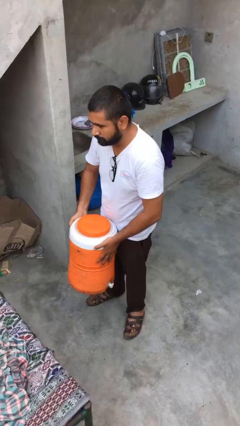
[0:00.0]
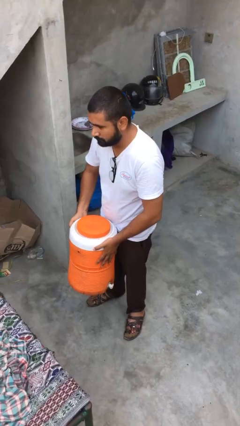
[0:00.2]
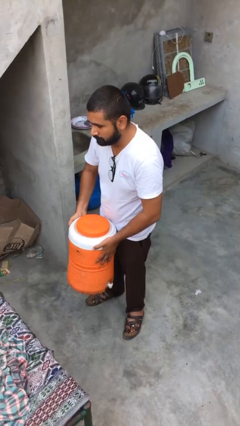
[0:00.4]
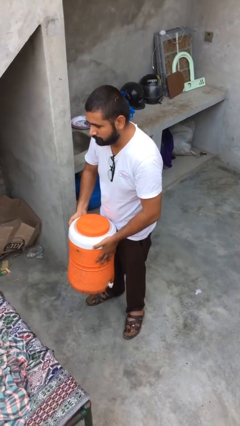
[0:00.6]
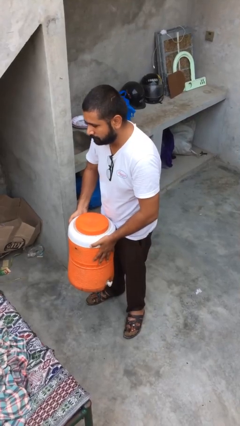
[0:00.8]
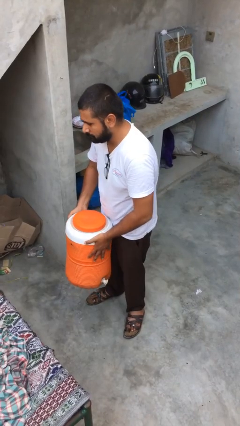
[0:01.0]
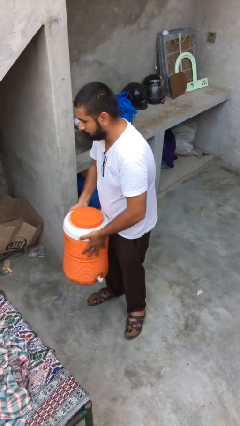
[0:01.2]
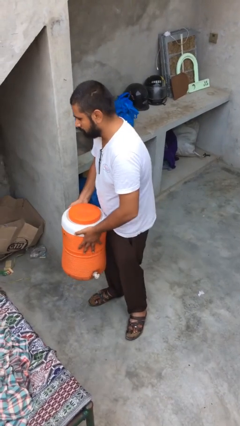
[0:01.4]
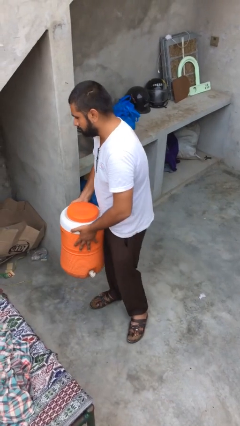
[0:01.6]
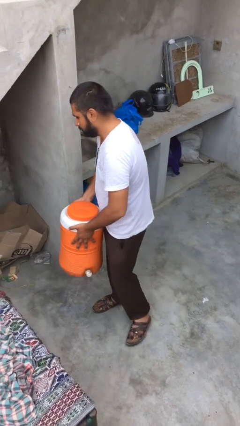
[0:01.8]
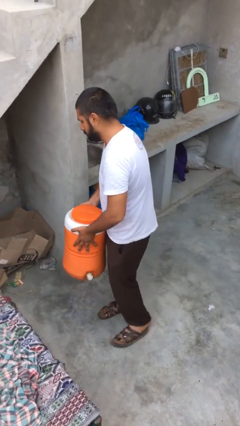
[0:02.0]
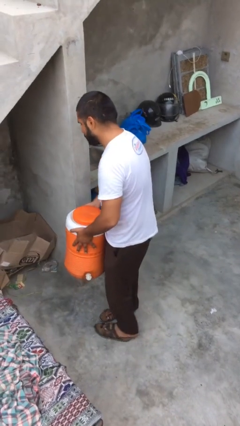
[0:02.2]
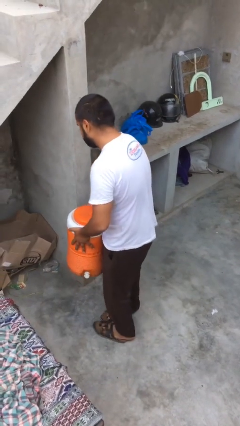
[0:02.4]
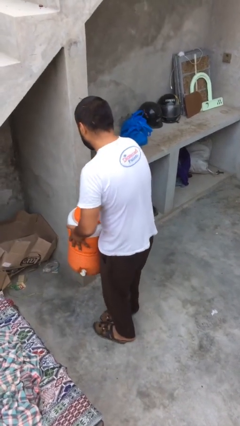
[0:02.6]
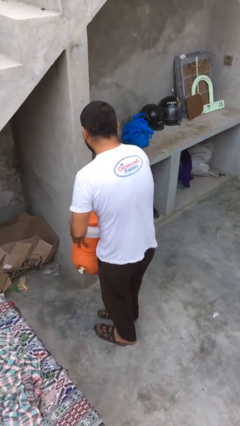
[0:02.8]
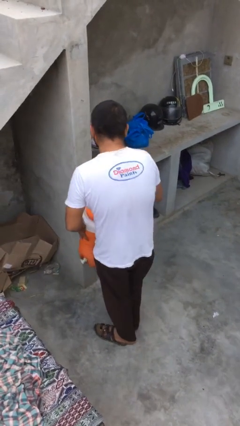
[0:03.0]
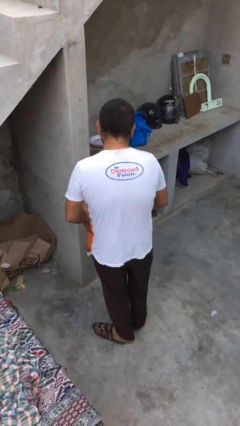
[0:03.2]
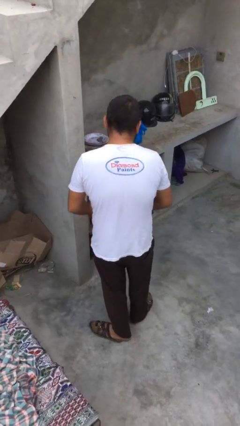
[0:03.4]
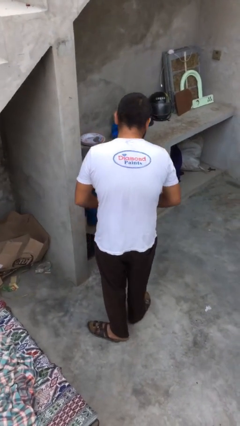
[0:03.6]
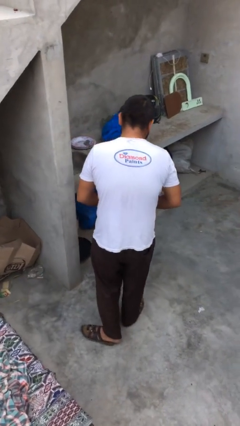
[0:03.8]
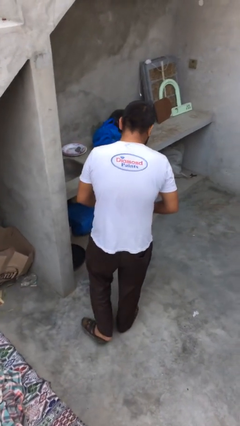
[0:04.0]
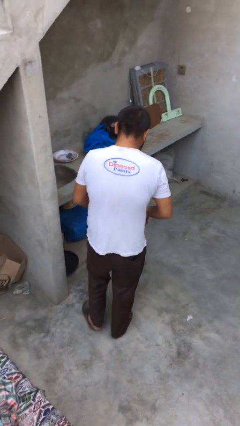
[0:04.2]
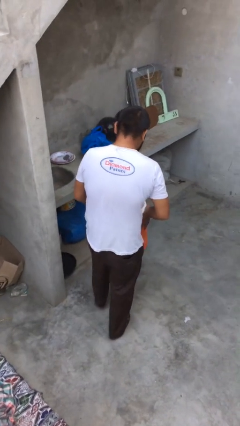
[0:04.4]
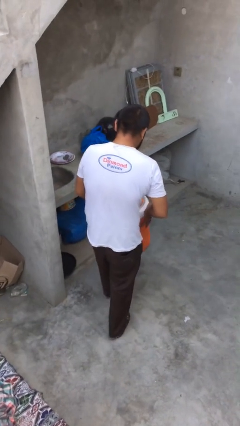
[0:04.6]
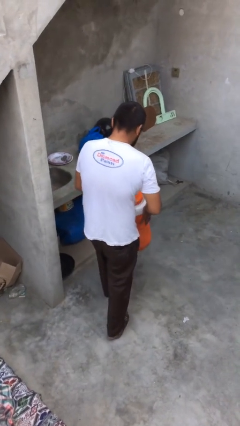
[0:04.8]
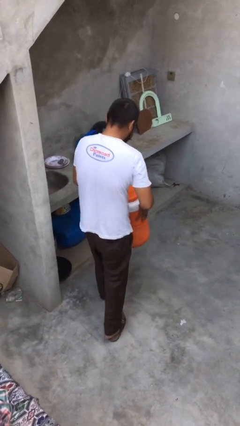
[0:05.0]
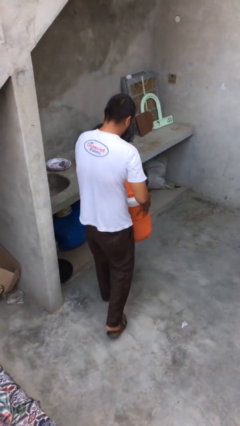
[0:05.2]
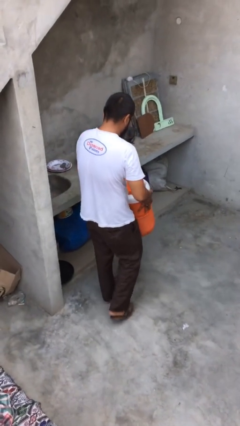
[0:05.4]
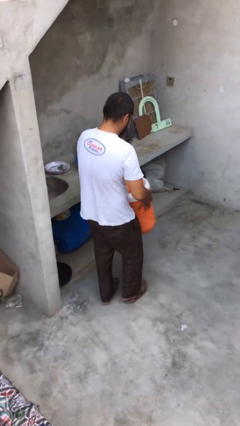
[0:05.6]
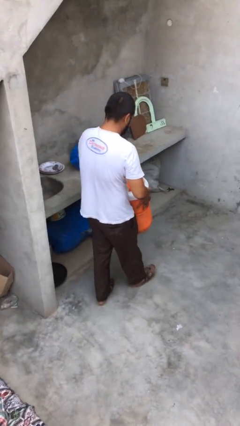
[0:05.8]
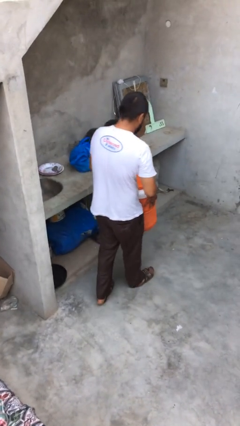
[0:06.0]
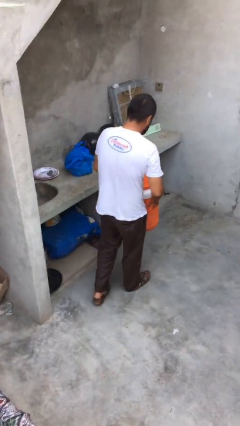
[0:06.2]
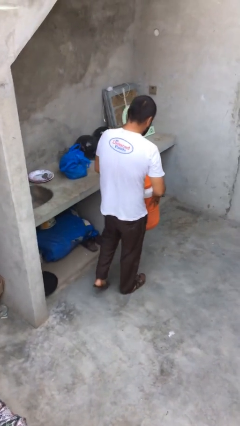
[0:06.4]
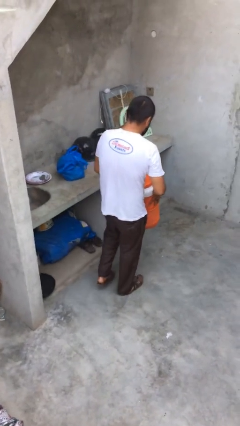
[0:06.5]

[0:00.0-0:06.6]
person carries heavy object

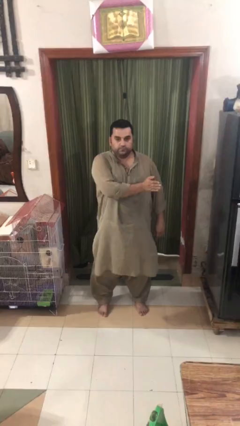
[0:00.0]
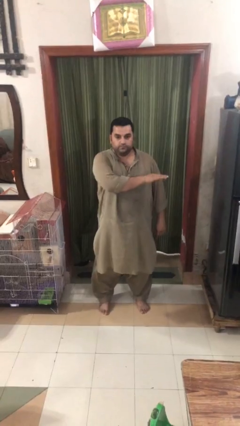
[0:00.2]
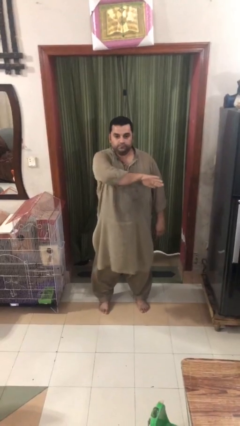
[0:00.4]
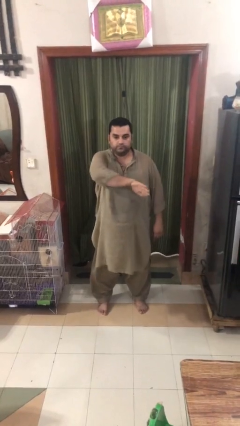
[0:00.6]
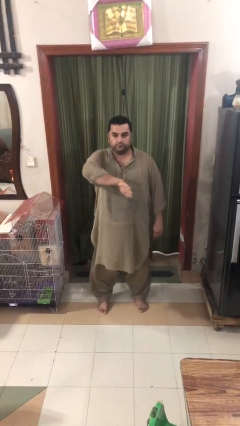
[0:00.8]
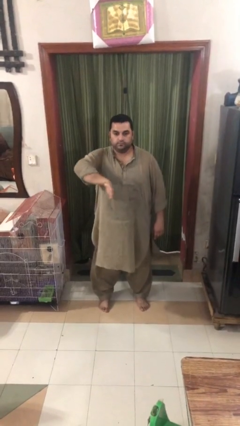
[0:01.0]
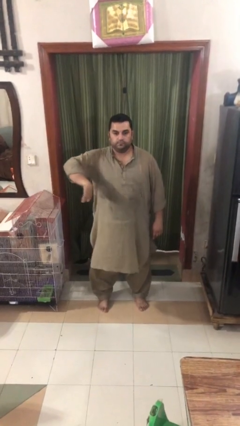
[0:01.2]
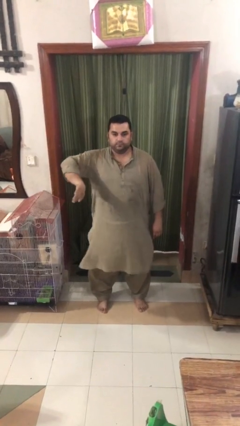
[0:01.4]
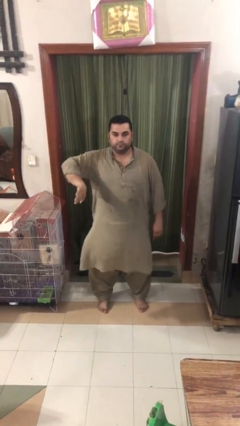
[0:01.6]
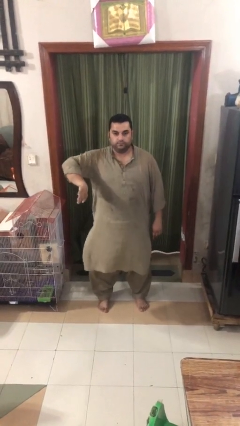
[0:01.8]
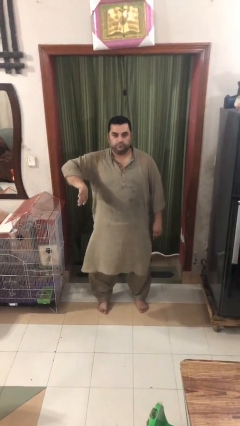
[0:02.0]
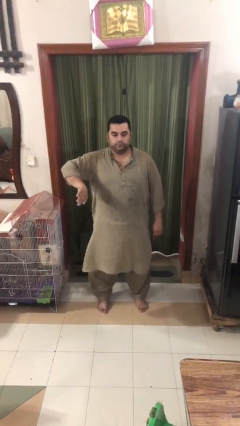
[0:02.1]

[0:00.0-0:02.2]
person gestures swipe right

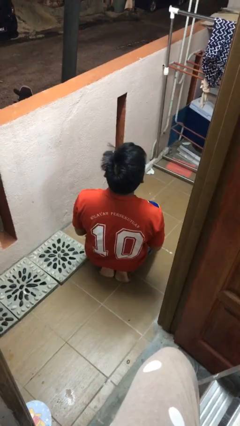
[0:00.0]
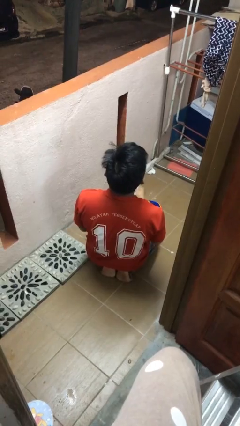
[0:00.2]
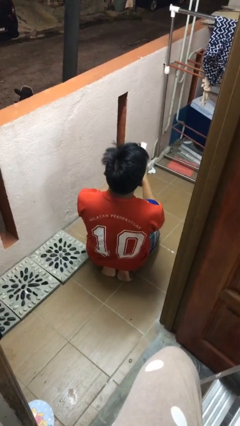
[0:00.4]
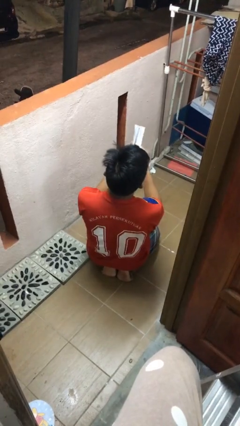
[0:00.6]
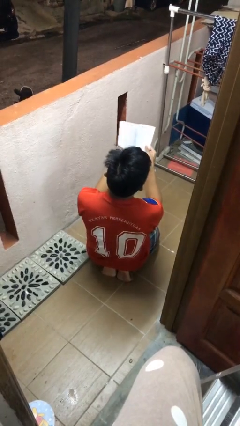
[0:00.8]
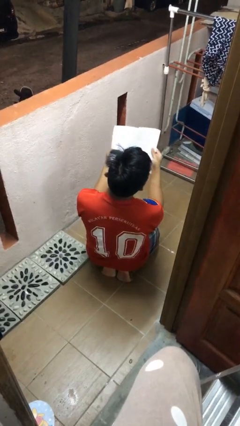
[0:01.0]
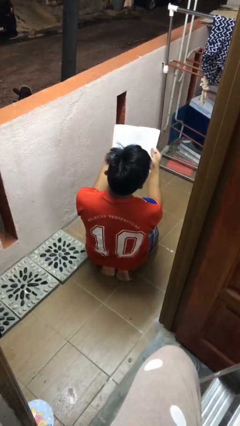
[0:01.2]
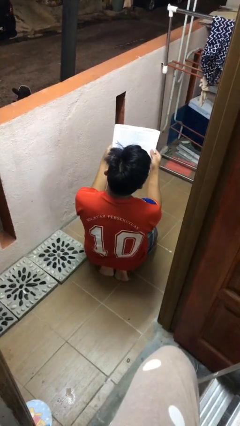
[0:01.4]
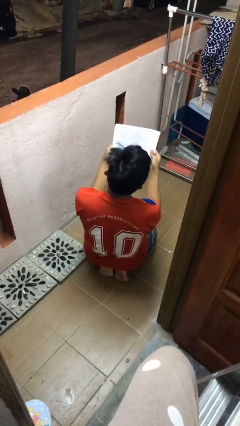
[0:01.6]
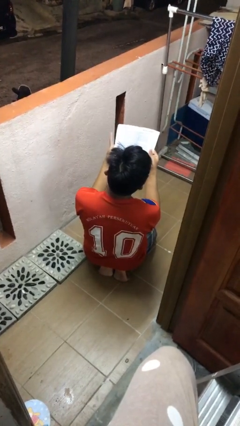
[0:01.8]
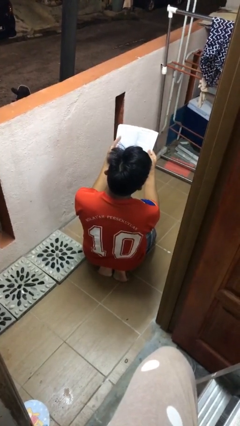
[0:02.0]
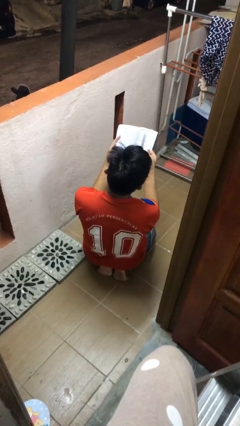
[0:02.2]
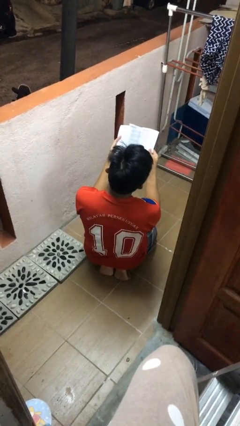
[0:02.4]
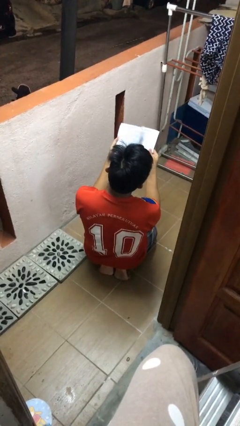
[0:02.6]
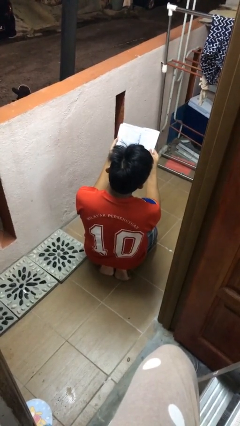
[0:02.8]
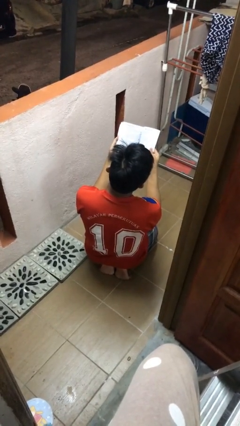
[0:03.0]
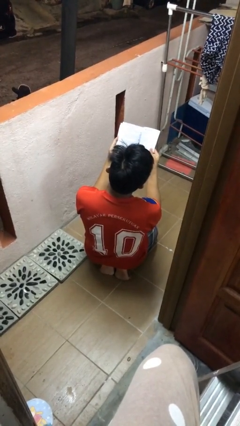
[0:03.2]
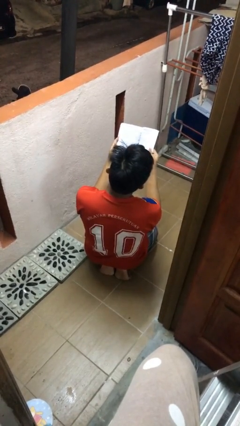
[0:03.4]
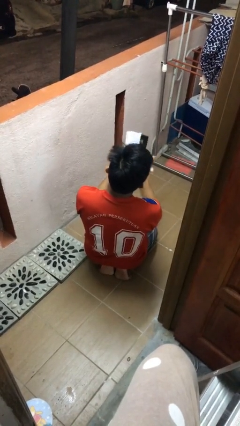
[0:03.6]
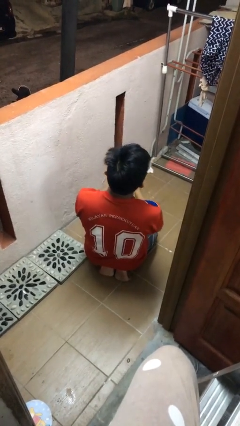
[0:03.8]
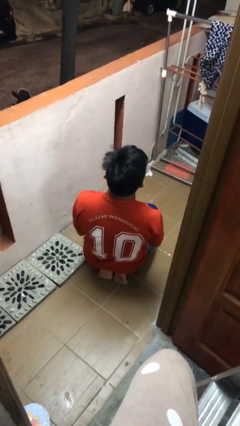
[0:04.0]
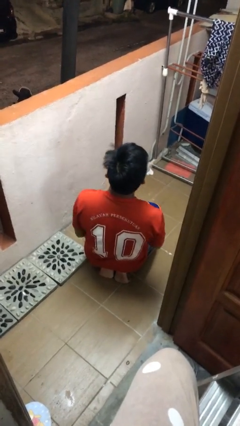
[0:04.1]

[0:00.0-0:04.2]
person reads book

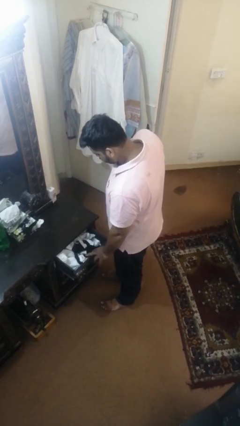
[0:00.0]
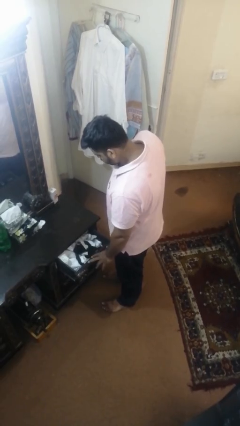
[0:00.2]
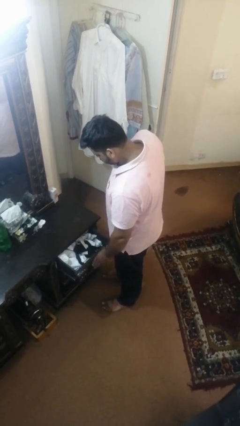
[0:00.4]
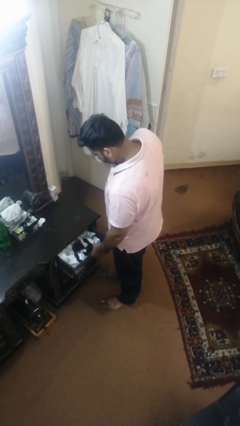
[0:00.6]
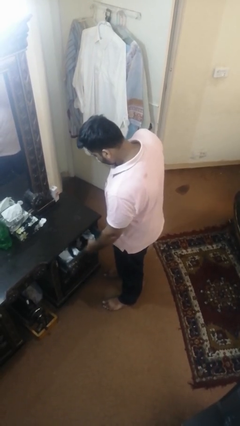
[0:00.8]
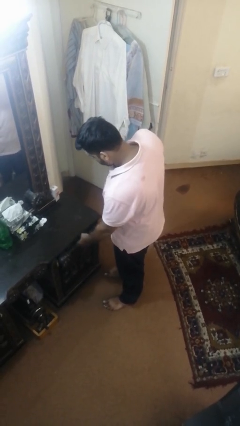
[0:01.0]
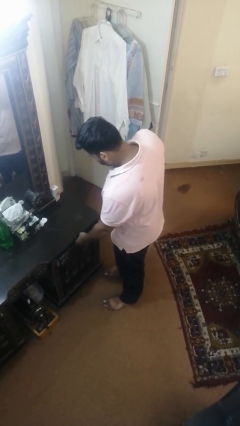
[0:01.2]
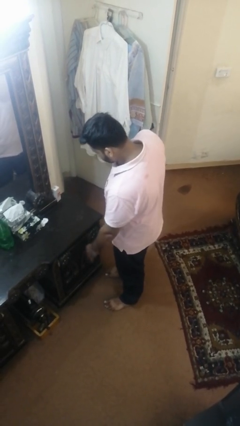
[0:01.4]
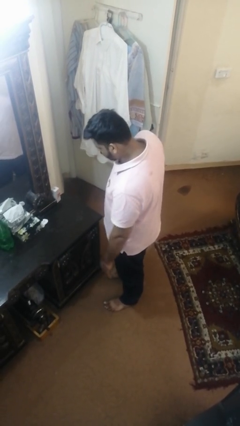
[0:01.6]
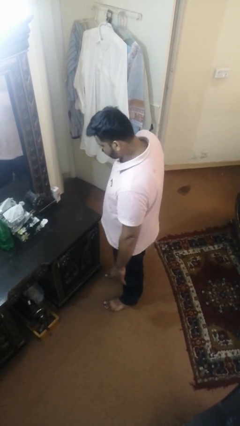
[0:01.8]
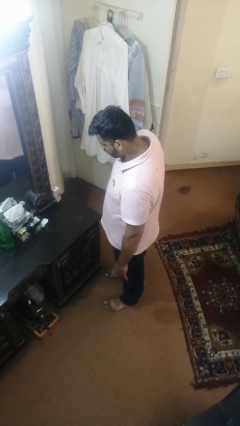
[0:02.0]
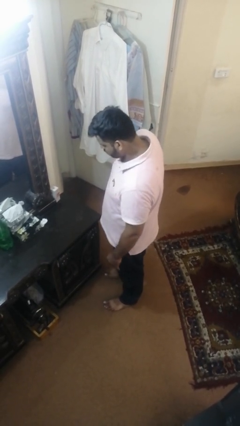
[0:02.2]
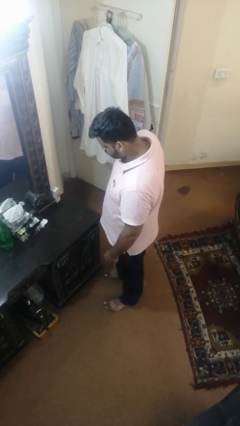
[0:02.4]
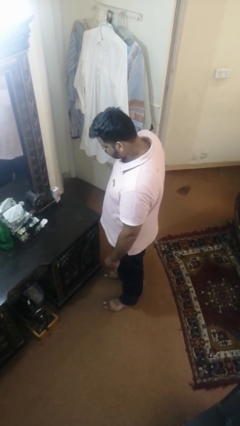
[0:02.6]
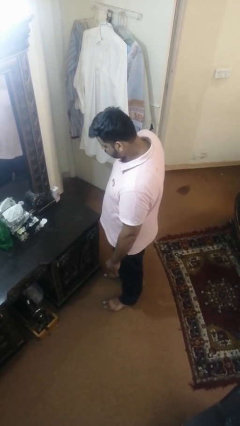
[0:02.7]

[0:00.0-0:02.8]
person closes dresser drawer

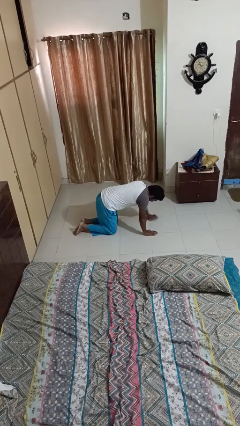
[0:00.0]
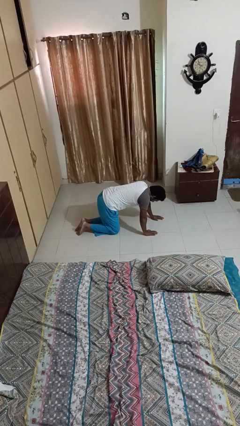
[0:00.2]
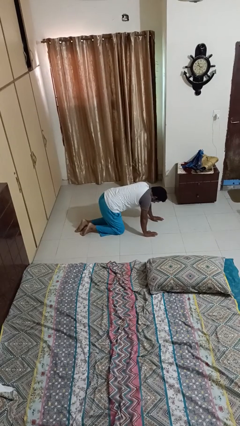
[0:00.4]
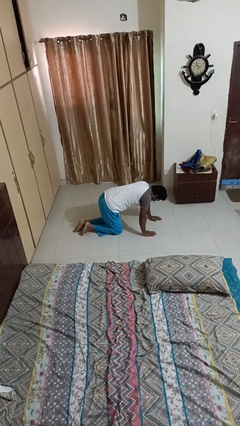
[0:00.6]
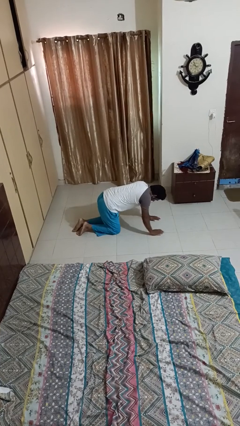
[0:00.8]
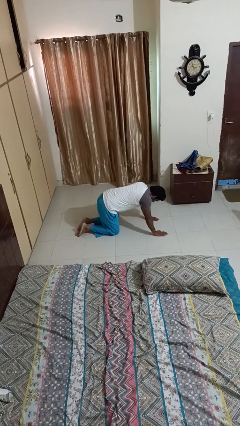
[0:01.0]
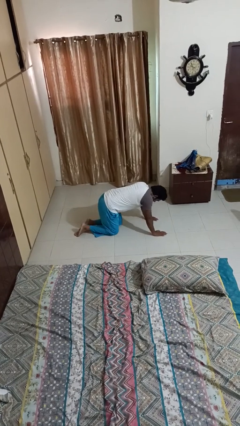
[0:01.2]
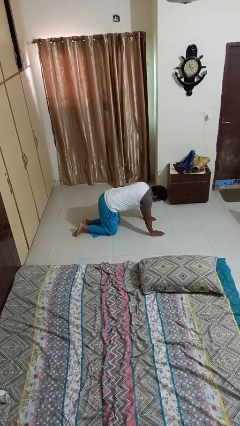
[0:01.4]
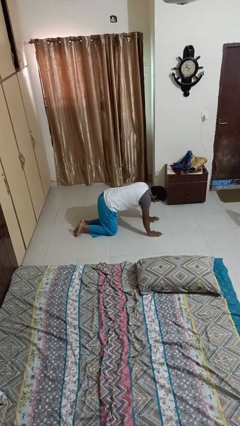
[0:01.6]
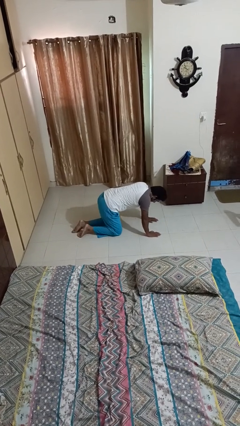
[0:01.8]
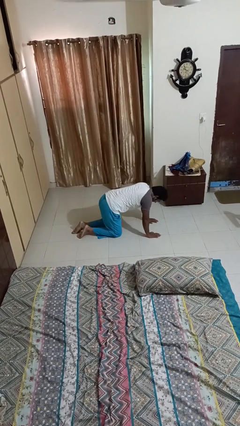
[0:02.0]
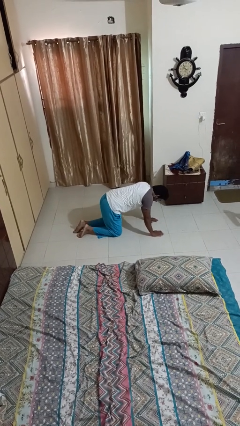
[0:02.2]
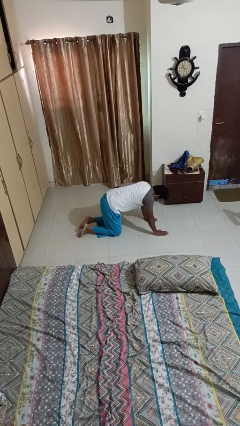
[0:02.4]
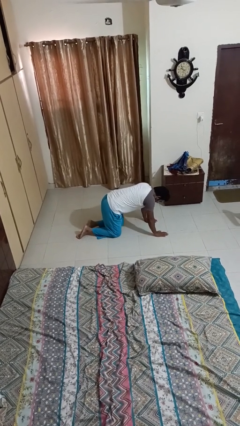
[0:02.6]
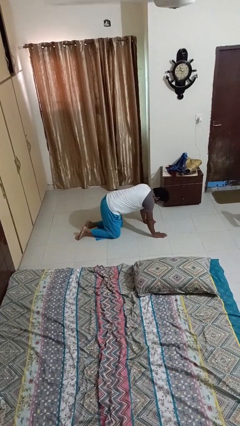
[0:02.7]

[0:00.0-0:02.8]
person crawls
